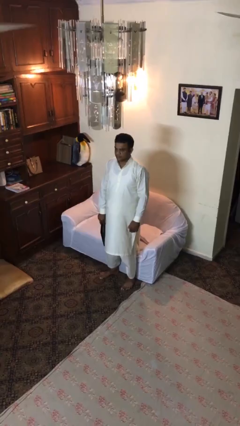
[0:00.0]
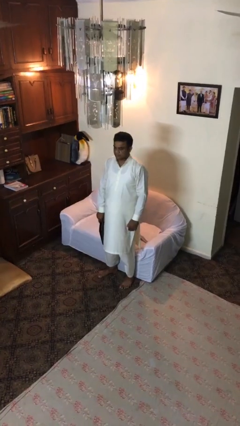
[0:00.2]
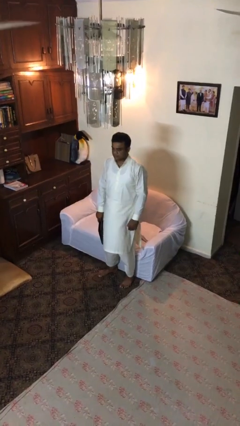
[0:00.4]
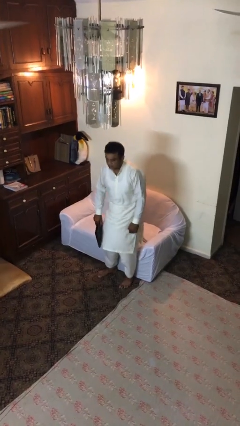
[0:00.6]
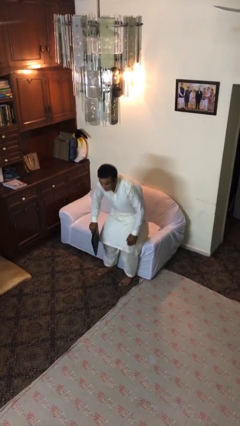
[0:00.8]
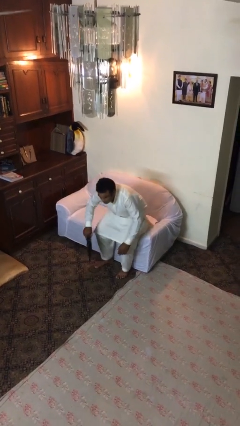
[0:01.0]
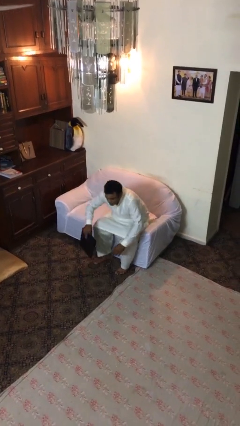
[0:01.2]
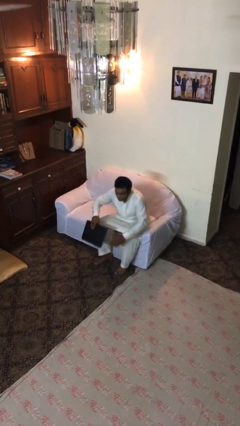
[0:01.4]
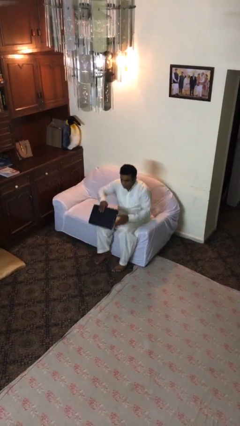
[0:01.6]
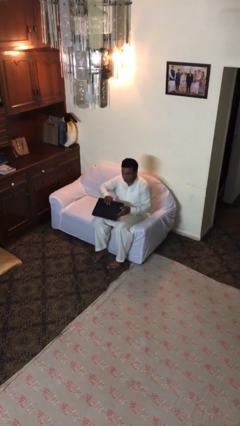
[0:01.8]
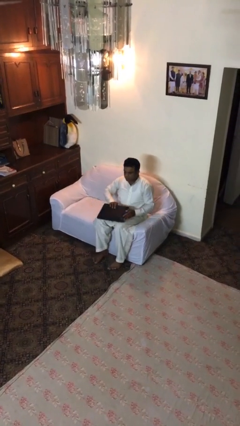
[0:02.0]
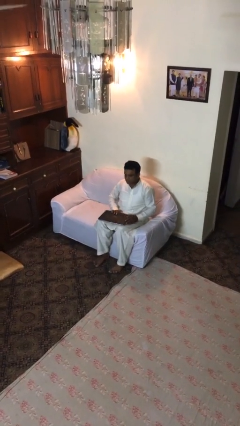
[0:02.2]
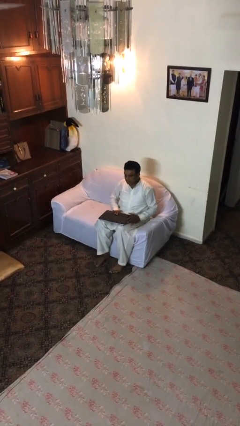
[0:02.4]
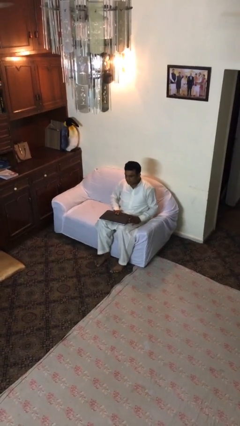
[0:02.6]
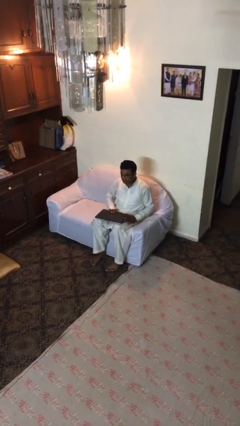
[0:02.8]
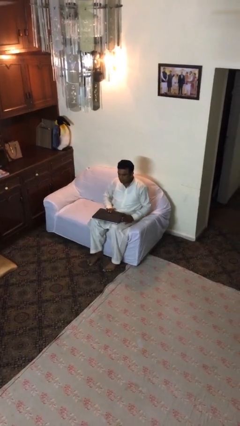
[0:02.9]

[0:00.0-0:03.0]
person sits down

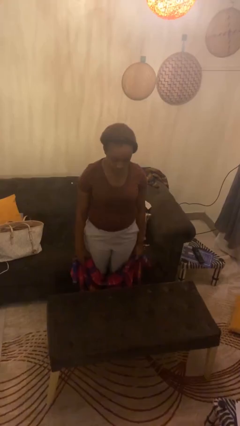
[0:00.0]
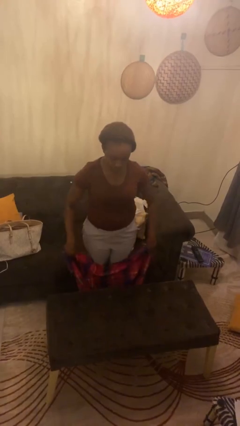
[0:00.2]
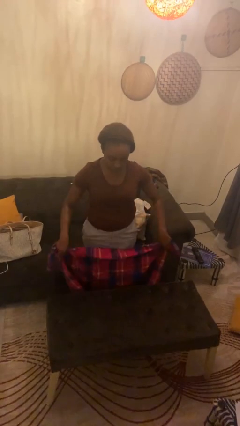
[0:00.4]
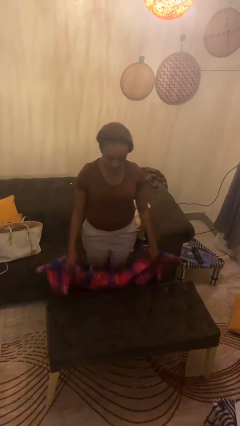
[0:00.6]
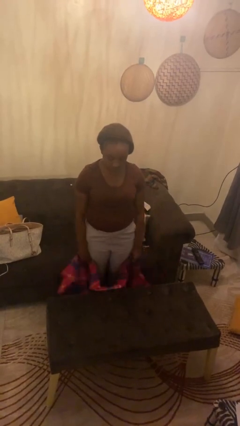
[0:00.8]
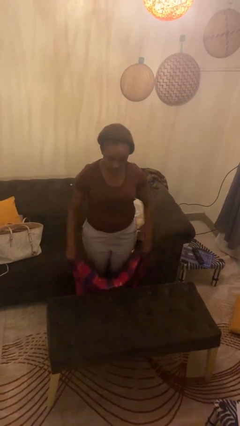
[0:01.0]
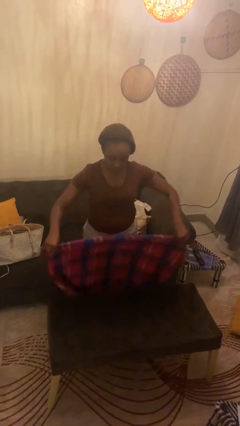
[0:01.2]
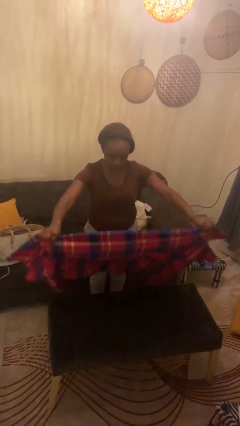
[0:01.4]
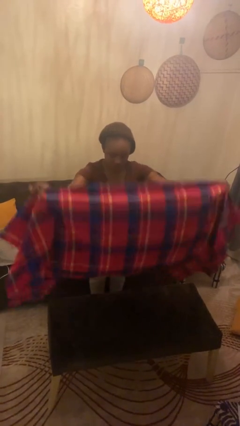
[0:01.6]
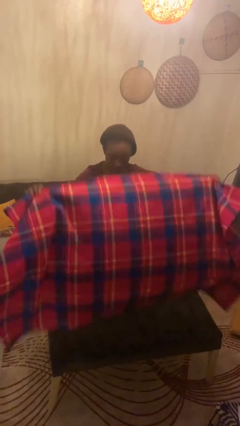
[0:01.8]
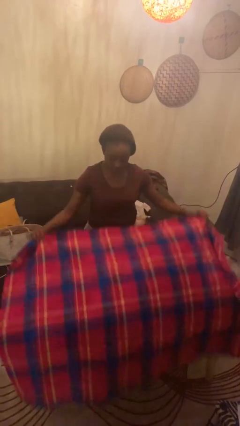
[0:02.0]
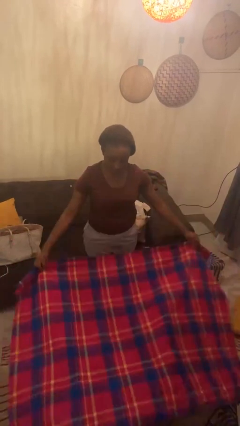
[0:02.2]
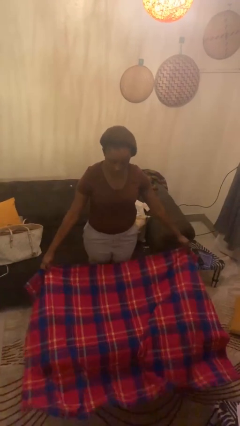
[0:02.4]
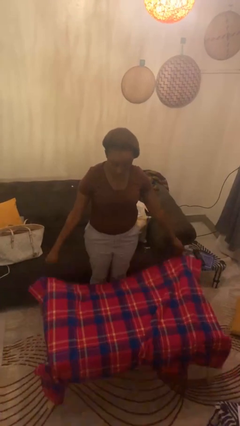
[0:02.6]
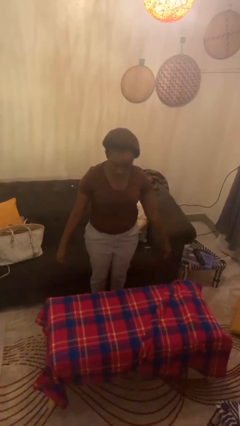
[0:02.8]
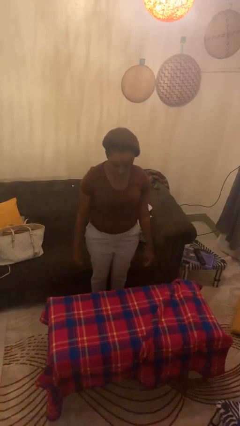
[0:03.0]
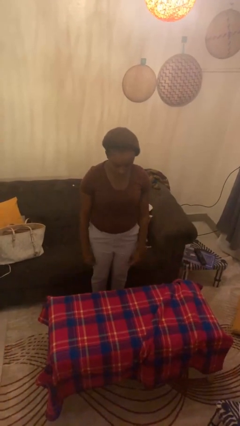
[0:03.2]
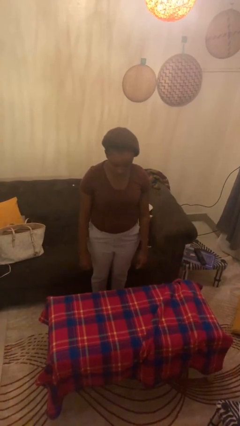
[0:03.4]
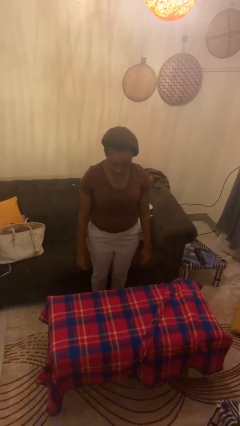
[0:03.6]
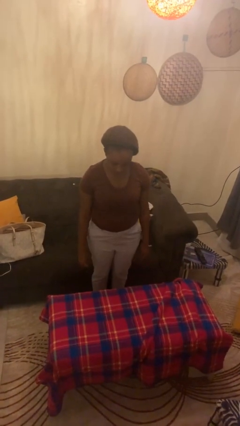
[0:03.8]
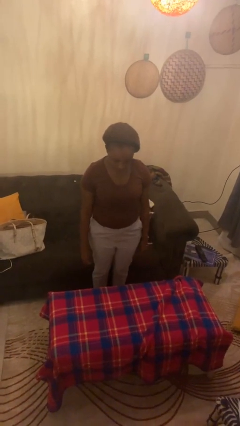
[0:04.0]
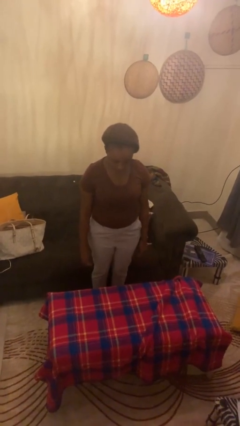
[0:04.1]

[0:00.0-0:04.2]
person spreads tablecloth

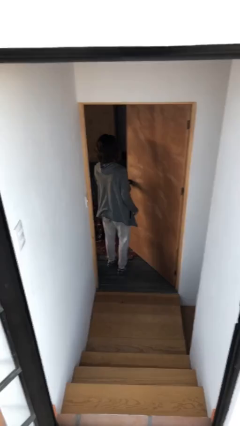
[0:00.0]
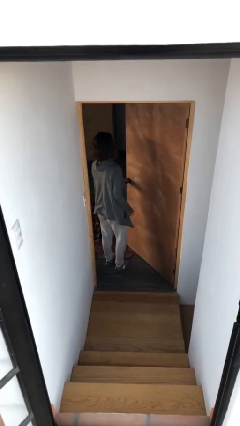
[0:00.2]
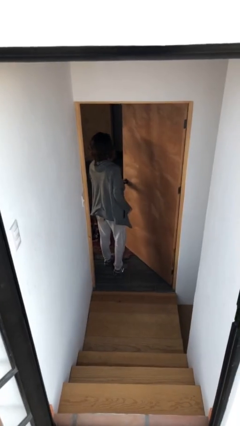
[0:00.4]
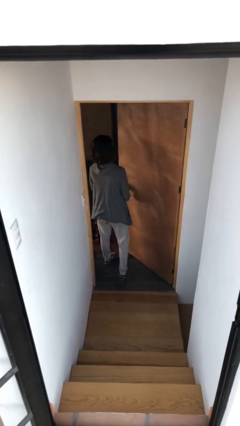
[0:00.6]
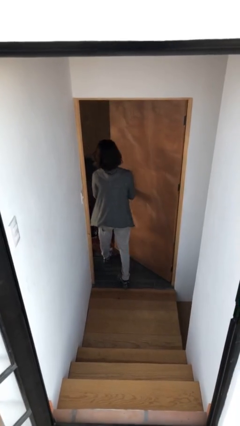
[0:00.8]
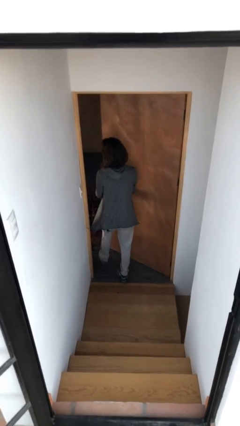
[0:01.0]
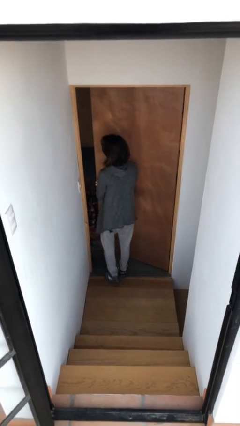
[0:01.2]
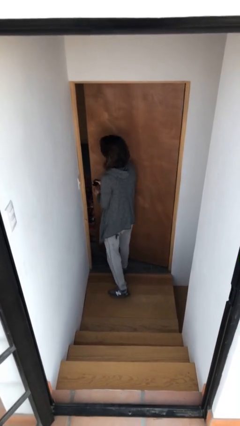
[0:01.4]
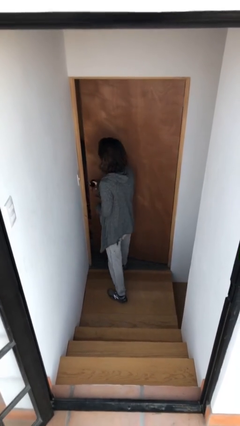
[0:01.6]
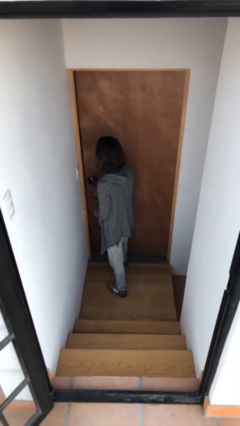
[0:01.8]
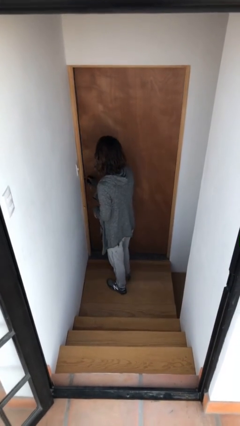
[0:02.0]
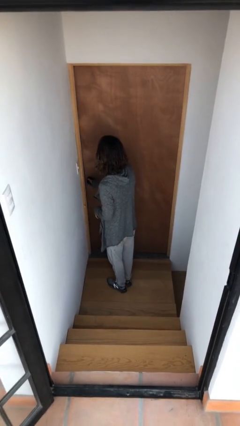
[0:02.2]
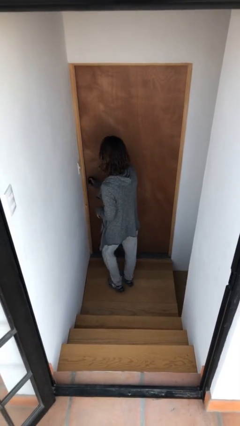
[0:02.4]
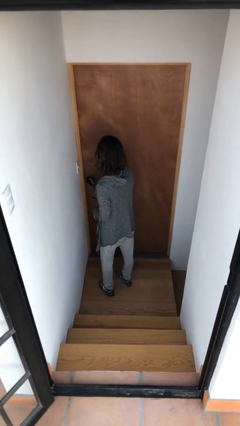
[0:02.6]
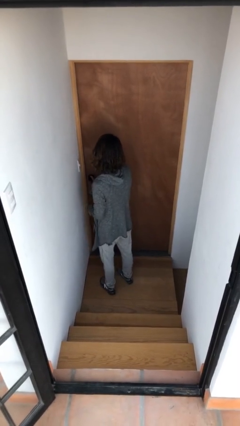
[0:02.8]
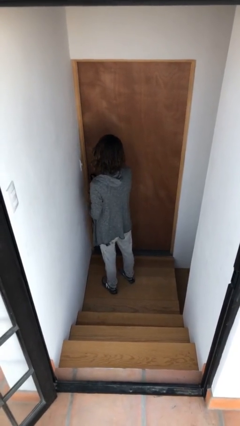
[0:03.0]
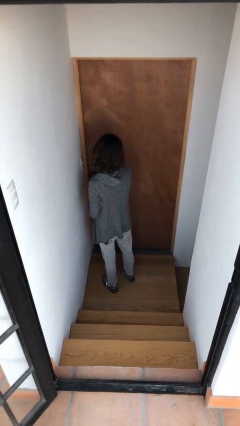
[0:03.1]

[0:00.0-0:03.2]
person closes facility door

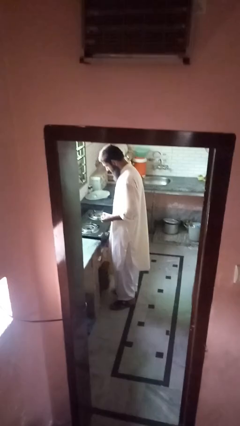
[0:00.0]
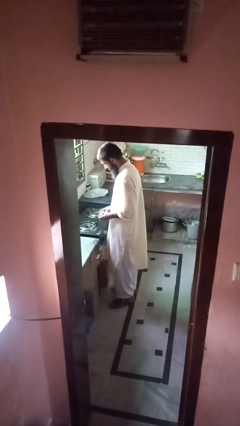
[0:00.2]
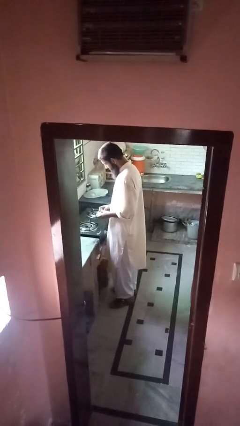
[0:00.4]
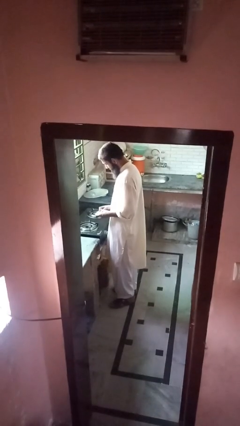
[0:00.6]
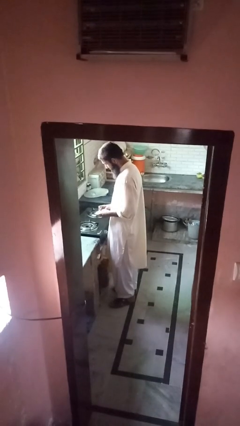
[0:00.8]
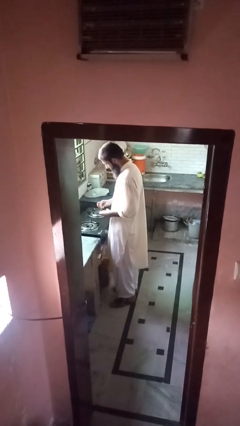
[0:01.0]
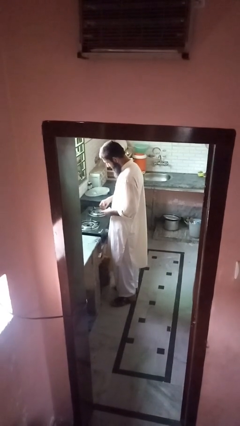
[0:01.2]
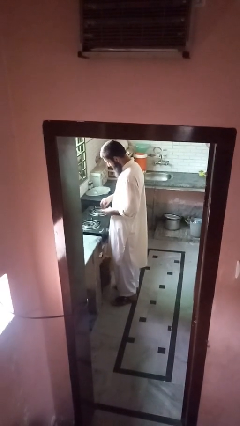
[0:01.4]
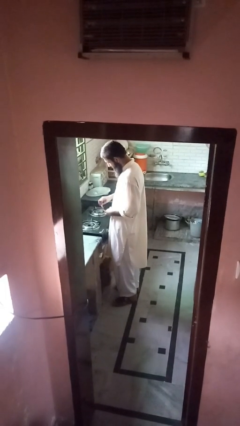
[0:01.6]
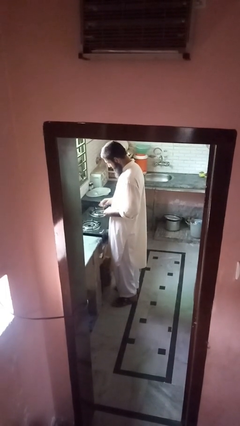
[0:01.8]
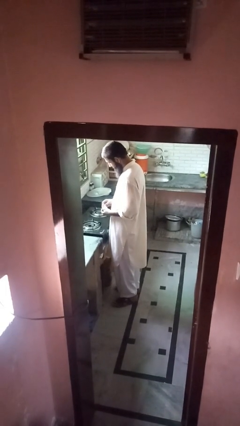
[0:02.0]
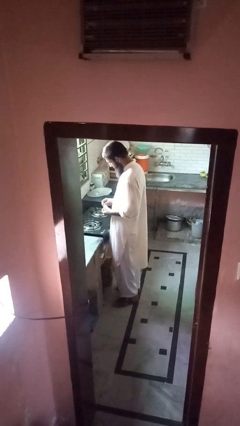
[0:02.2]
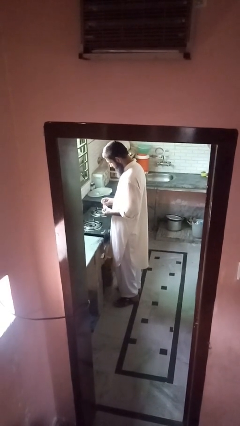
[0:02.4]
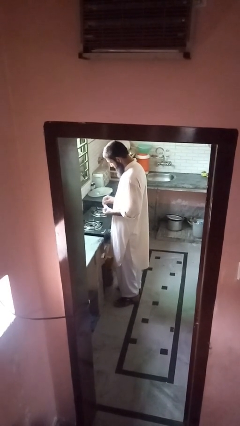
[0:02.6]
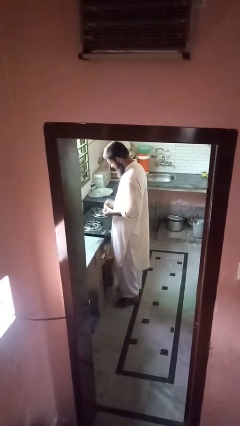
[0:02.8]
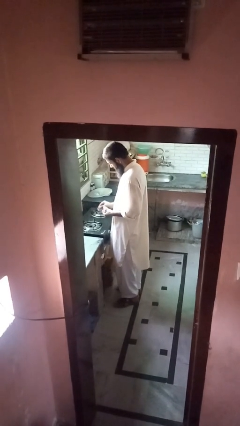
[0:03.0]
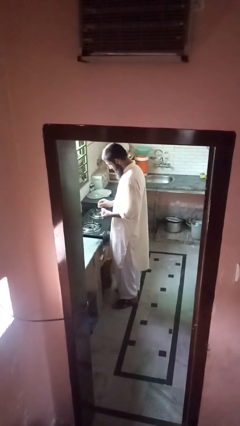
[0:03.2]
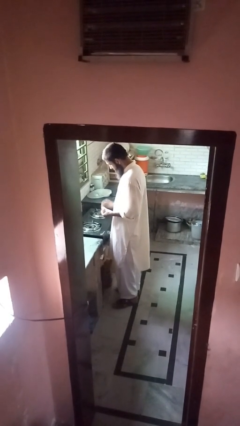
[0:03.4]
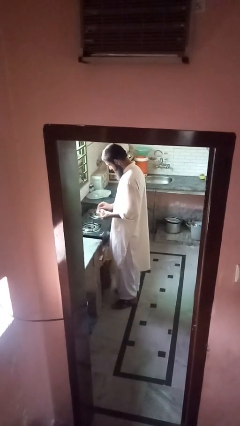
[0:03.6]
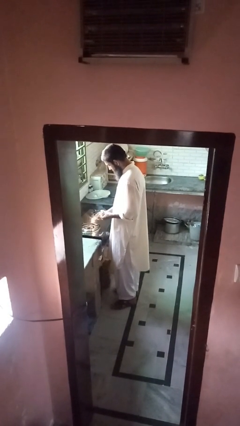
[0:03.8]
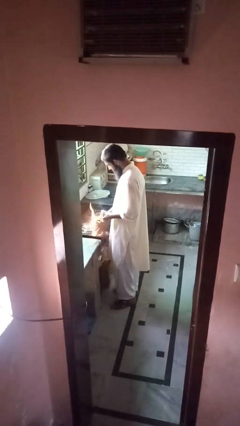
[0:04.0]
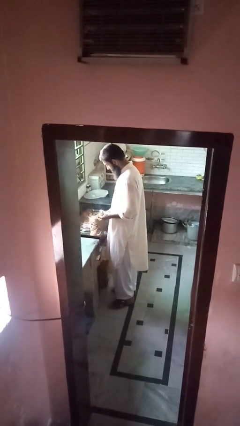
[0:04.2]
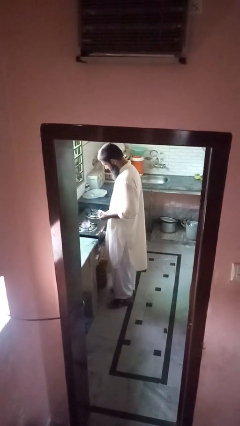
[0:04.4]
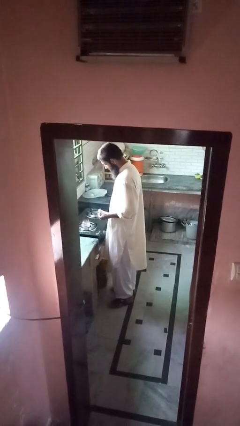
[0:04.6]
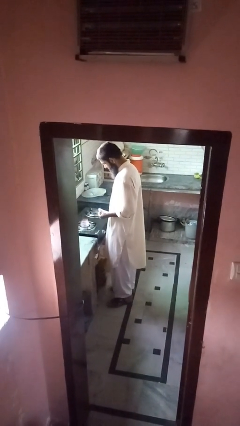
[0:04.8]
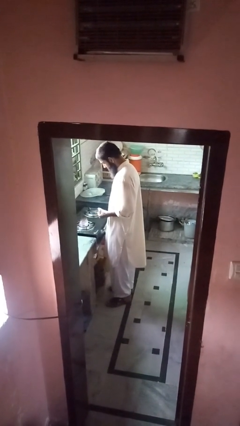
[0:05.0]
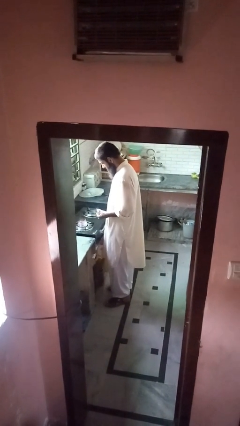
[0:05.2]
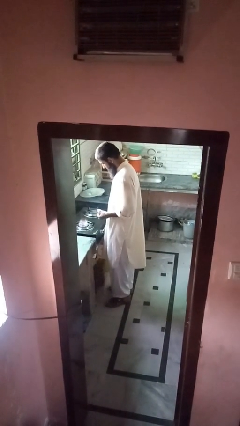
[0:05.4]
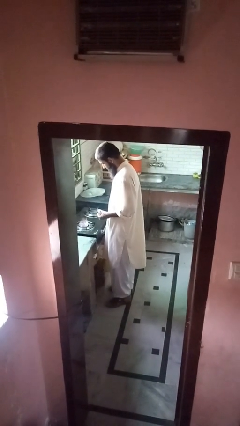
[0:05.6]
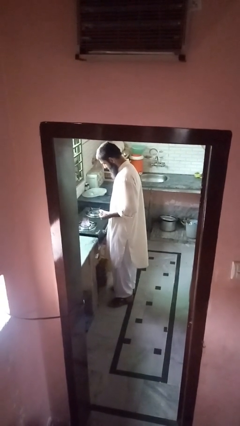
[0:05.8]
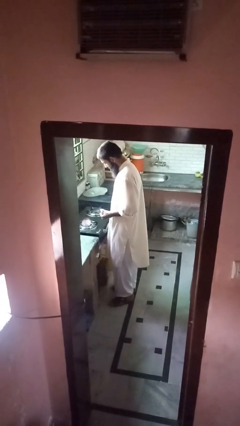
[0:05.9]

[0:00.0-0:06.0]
person turns on stovetop

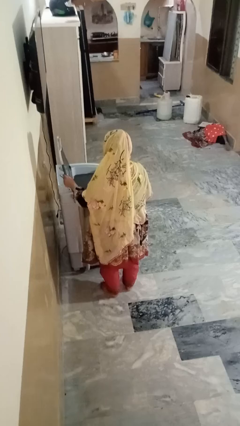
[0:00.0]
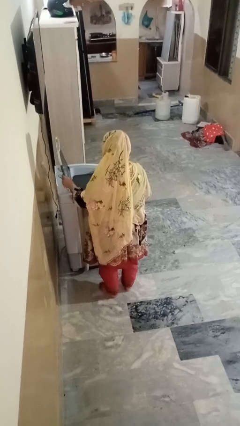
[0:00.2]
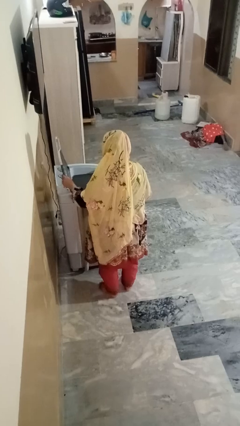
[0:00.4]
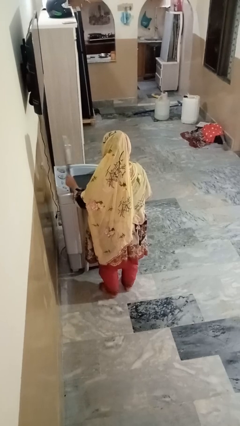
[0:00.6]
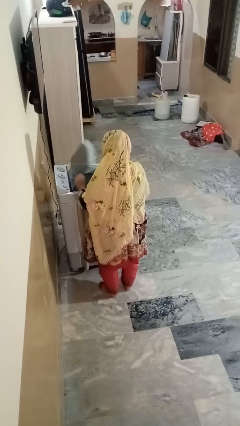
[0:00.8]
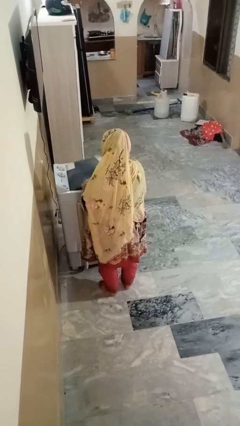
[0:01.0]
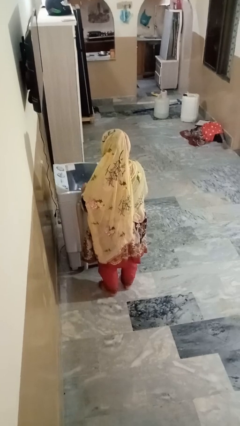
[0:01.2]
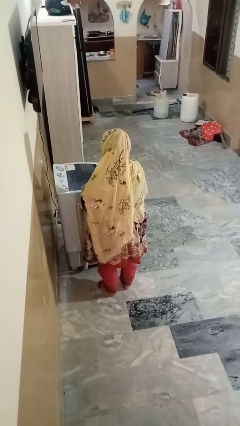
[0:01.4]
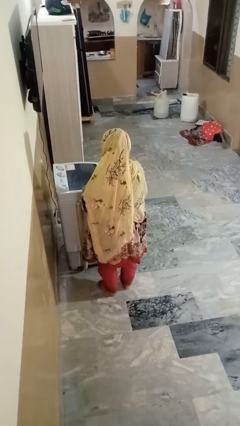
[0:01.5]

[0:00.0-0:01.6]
person closes clothes washer
